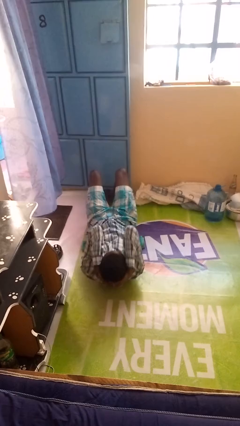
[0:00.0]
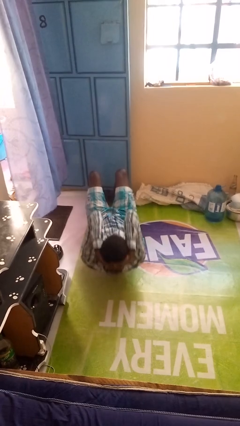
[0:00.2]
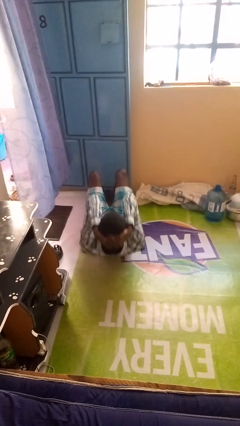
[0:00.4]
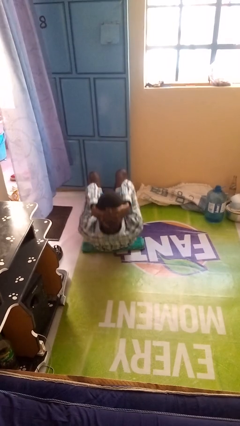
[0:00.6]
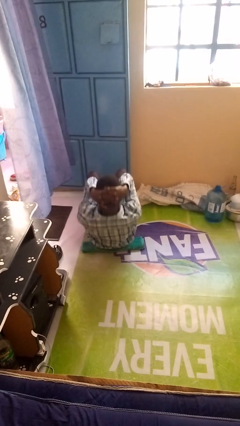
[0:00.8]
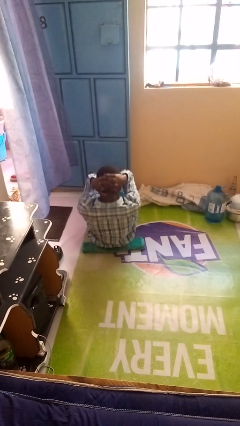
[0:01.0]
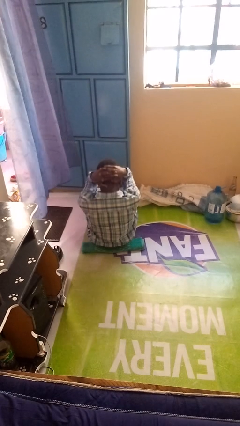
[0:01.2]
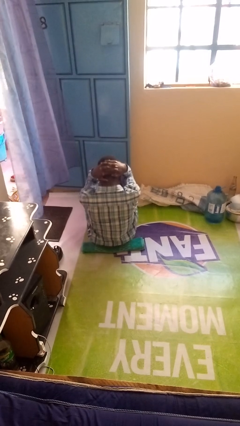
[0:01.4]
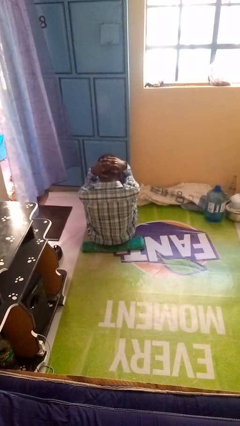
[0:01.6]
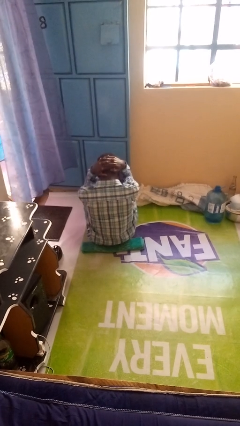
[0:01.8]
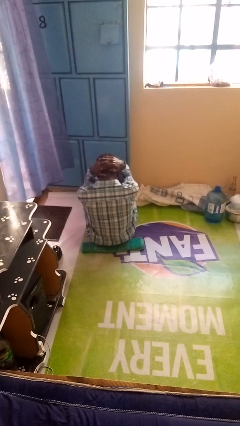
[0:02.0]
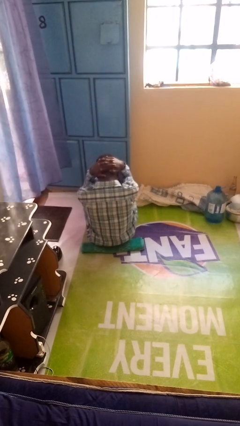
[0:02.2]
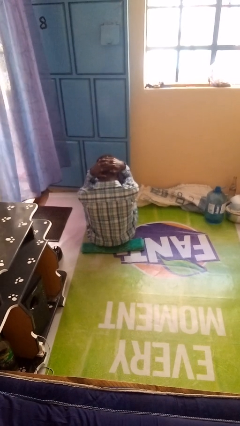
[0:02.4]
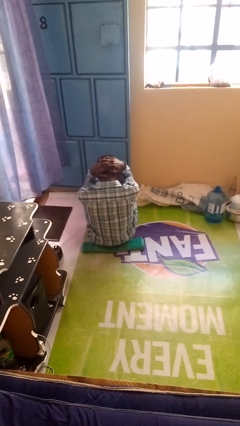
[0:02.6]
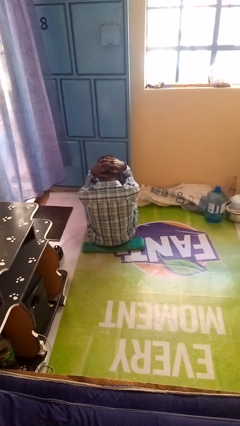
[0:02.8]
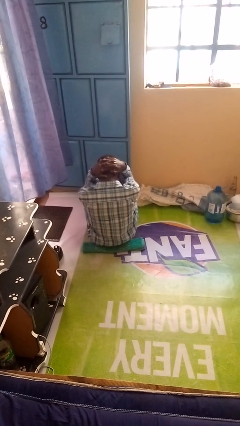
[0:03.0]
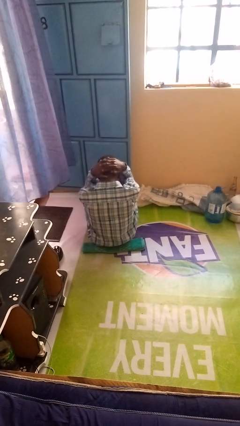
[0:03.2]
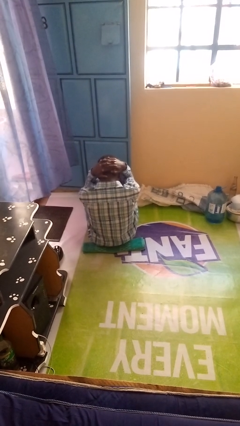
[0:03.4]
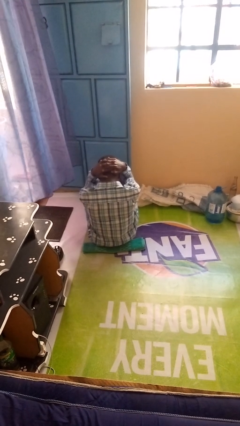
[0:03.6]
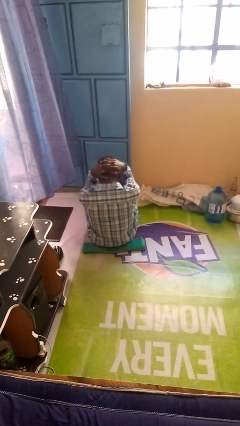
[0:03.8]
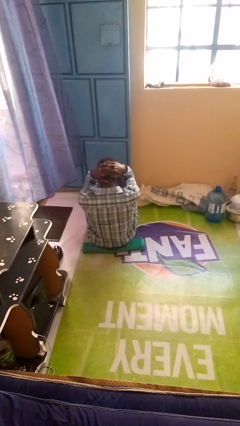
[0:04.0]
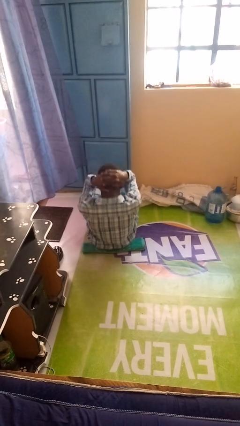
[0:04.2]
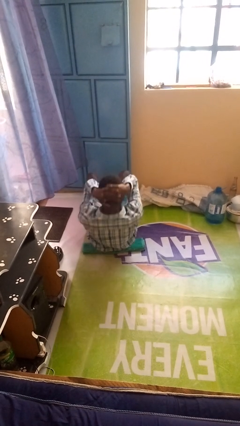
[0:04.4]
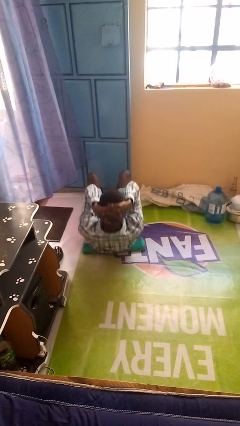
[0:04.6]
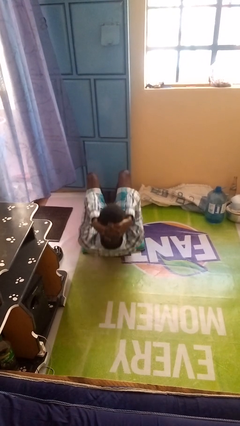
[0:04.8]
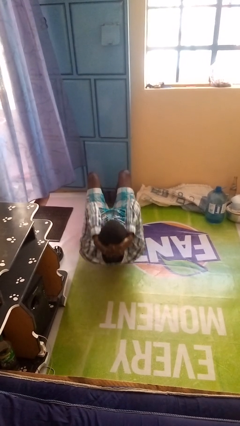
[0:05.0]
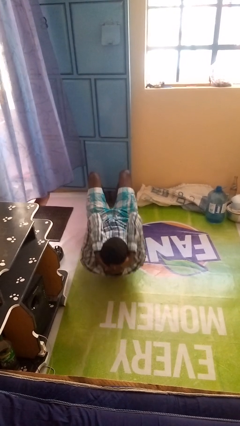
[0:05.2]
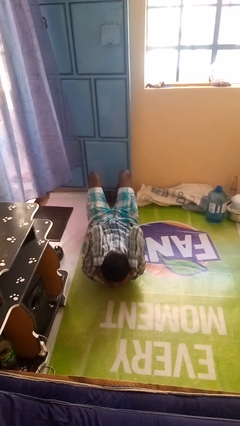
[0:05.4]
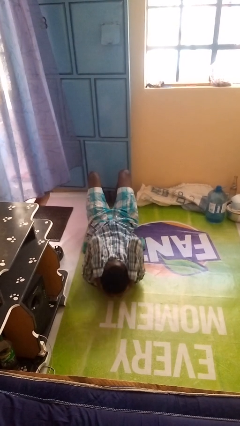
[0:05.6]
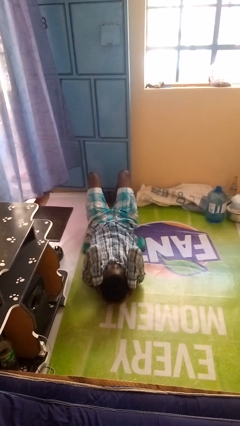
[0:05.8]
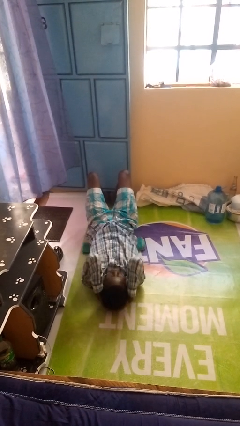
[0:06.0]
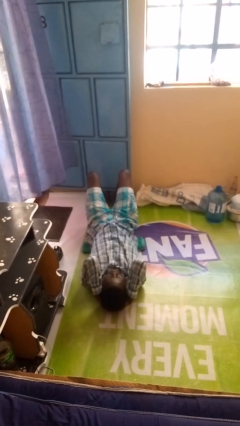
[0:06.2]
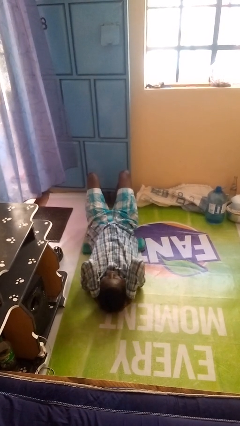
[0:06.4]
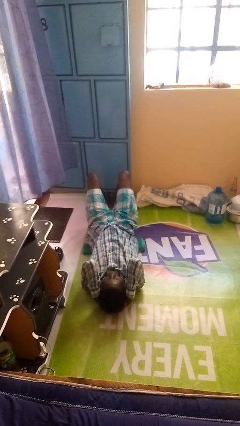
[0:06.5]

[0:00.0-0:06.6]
person exercises with situp

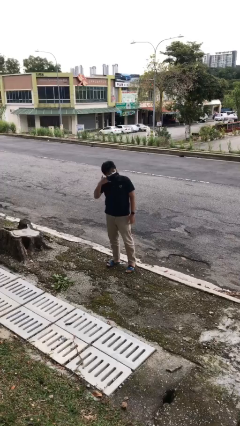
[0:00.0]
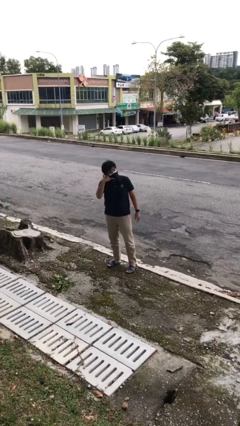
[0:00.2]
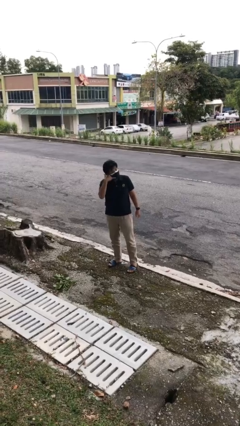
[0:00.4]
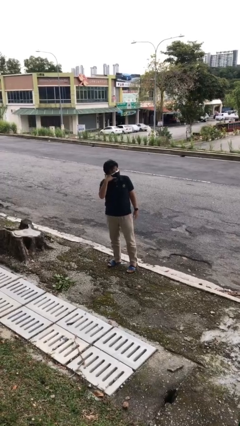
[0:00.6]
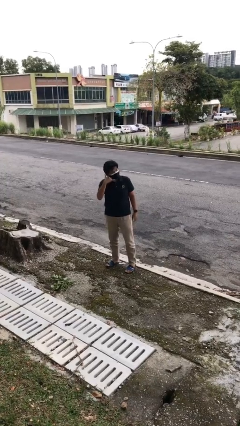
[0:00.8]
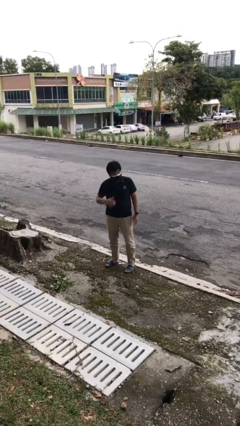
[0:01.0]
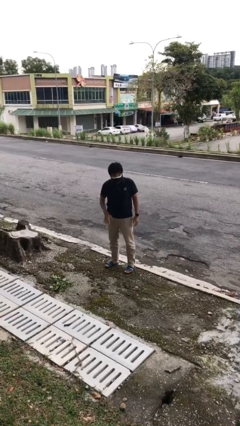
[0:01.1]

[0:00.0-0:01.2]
person gestures call me

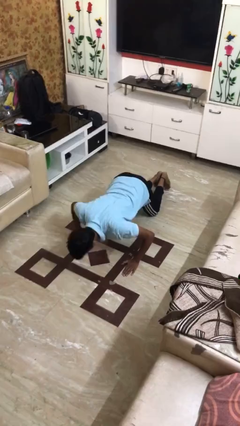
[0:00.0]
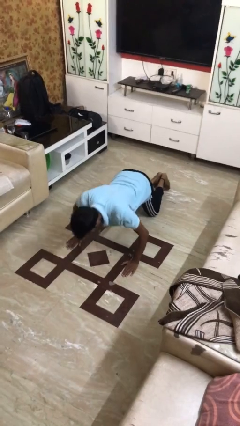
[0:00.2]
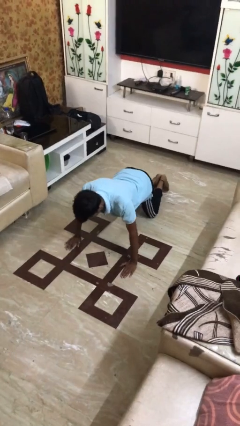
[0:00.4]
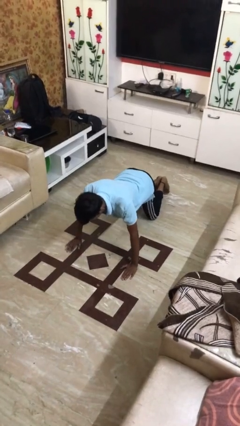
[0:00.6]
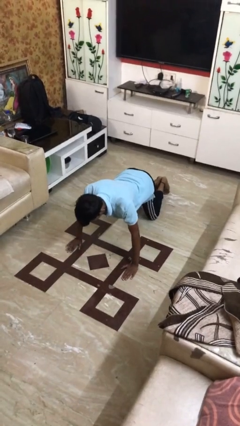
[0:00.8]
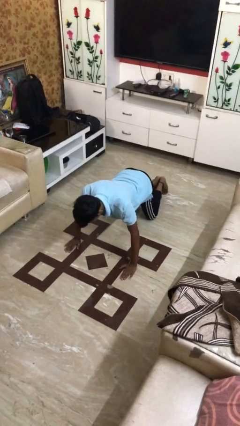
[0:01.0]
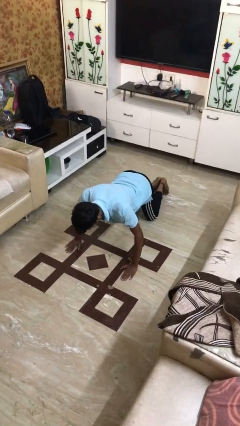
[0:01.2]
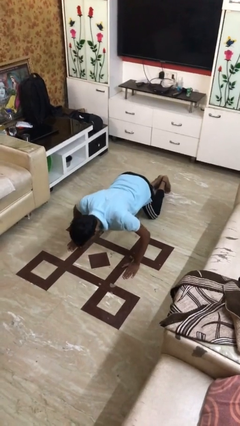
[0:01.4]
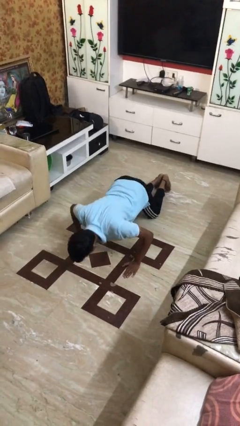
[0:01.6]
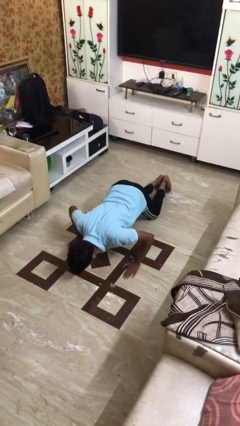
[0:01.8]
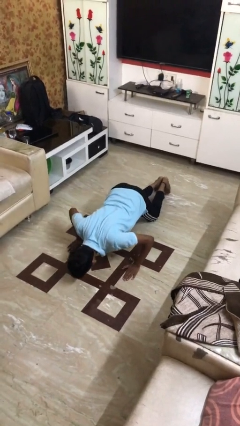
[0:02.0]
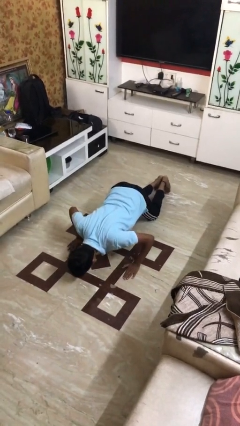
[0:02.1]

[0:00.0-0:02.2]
person exercises with pushup

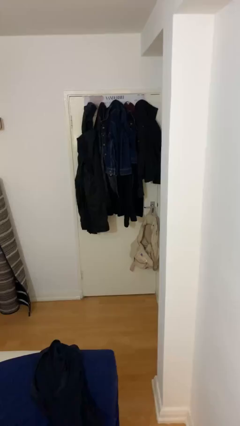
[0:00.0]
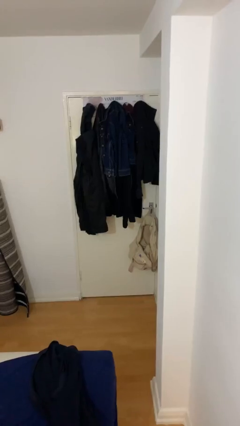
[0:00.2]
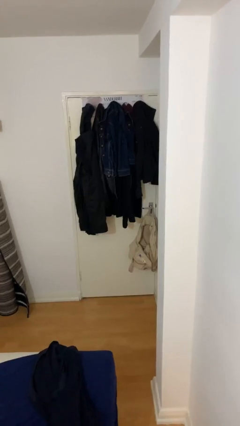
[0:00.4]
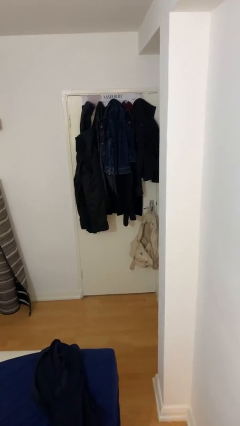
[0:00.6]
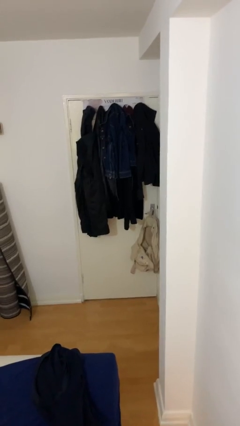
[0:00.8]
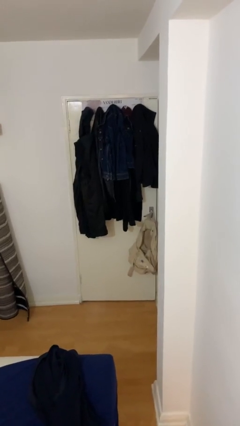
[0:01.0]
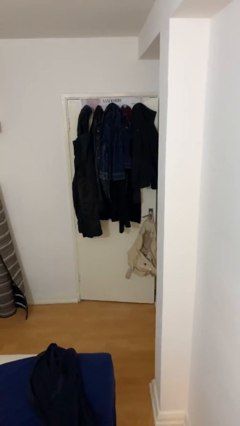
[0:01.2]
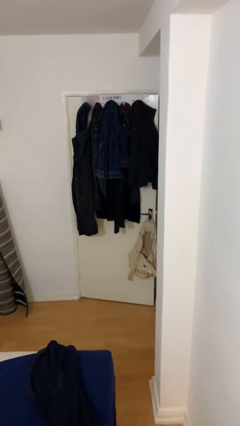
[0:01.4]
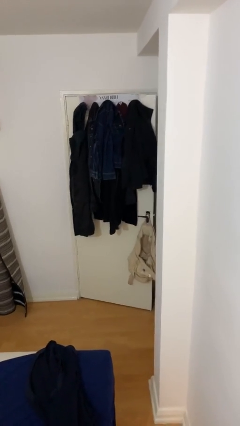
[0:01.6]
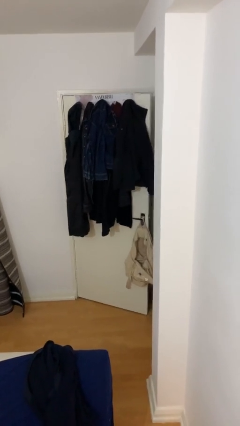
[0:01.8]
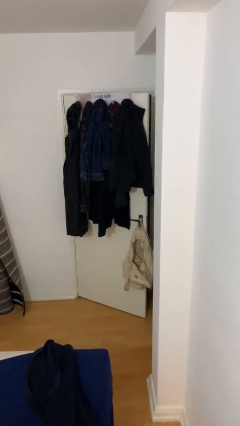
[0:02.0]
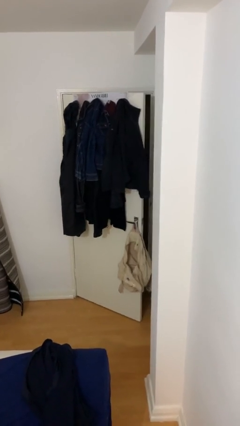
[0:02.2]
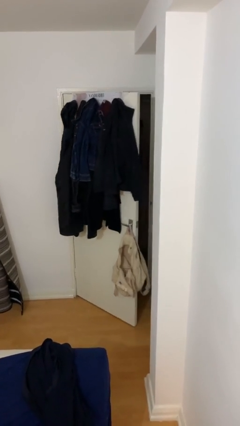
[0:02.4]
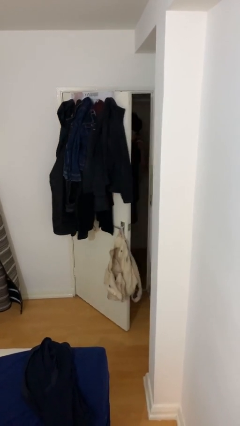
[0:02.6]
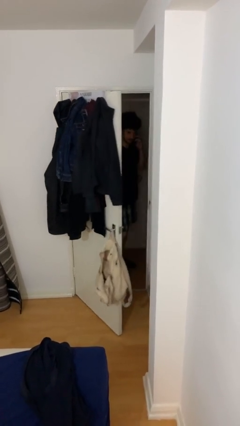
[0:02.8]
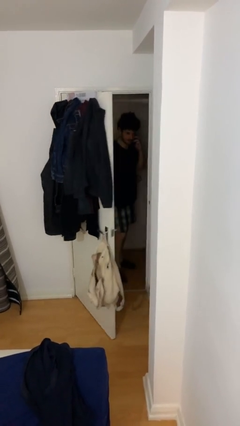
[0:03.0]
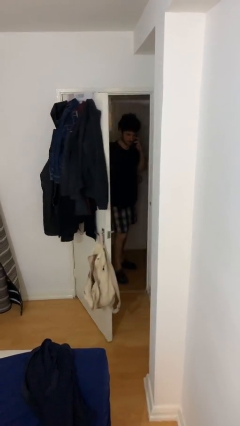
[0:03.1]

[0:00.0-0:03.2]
person opens facility door

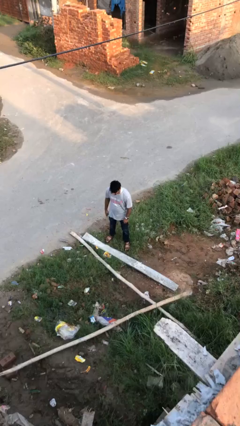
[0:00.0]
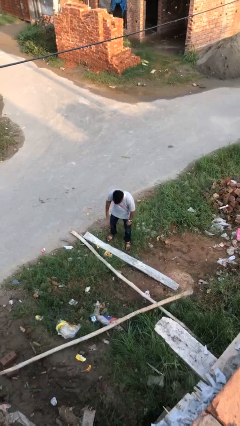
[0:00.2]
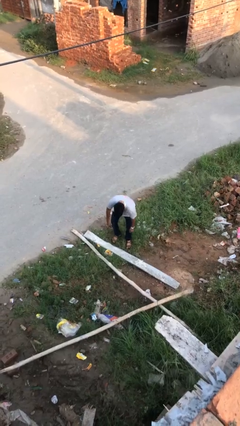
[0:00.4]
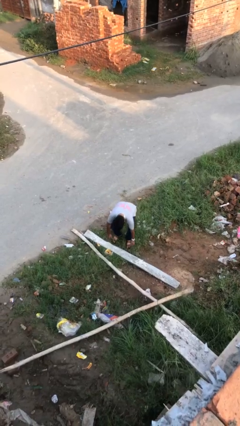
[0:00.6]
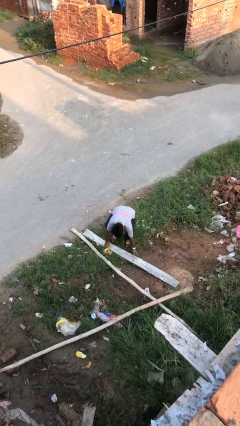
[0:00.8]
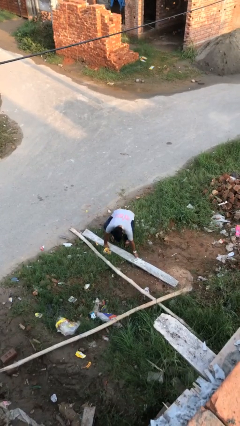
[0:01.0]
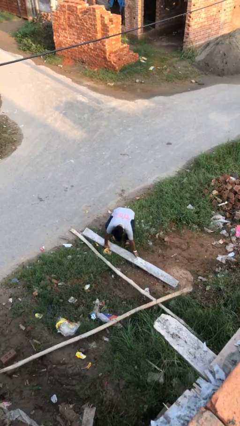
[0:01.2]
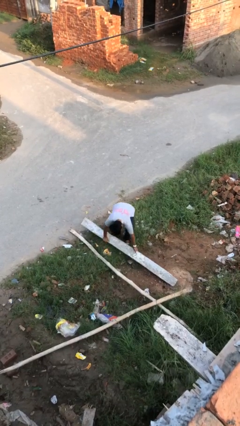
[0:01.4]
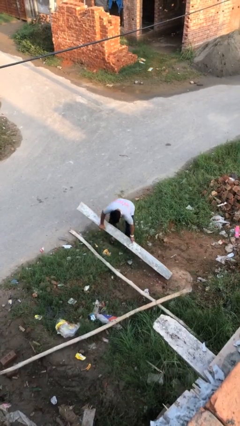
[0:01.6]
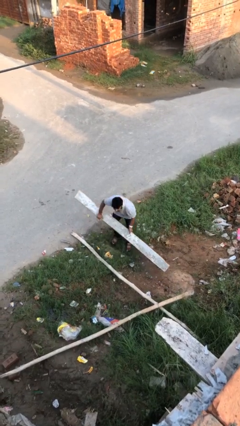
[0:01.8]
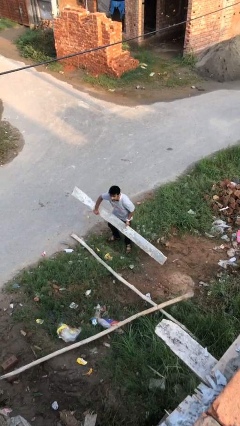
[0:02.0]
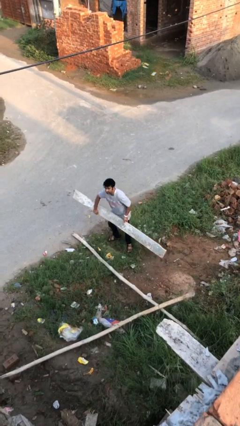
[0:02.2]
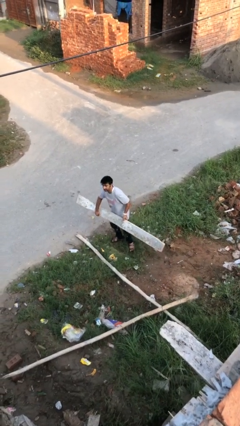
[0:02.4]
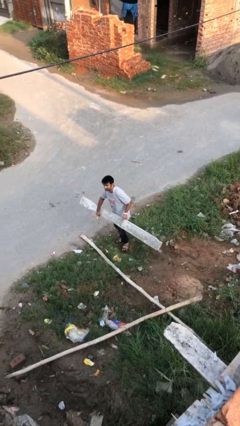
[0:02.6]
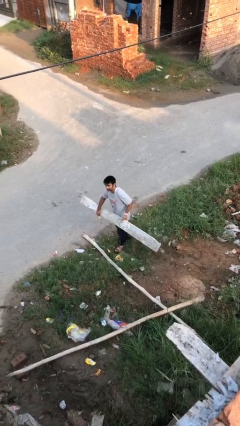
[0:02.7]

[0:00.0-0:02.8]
person picks up object from floor

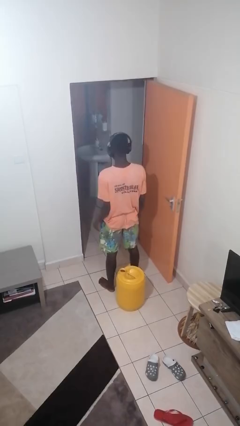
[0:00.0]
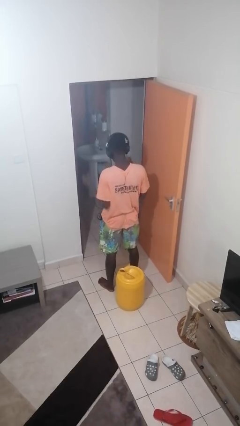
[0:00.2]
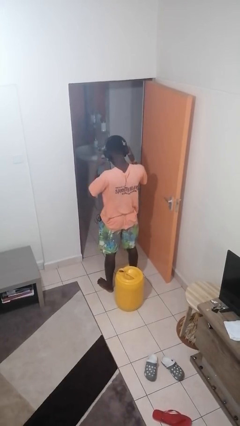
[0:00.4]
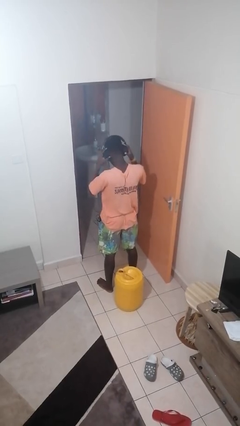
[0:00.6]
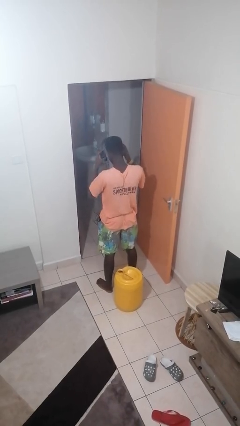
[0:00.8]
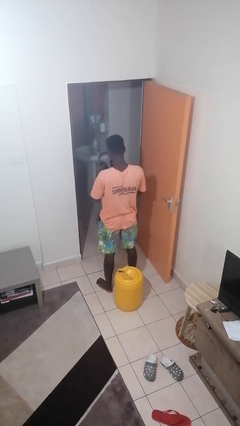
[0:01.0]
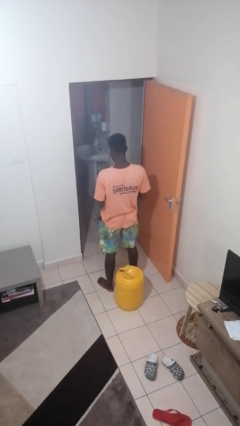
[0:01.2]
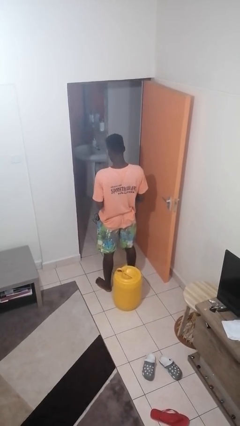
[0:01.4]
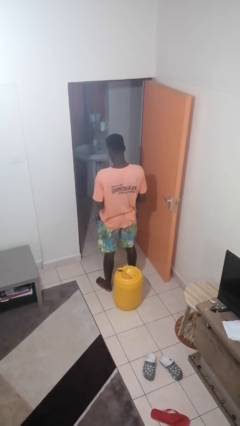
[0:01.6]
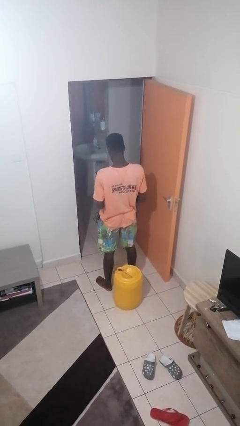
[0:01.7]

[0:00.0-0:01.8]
person takes off headphones
